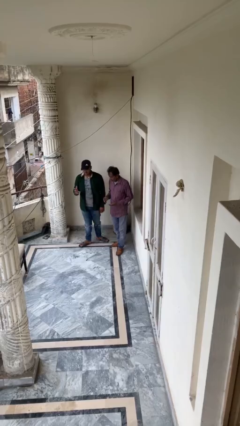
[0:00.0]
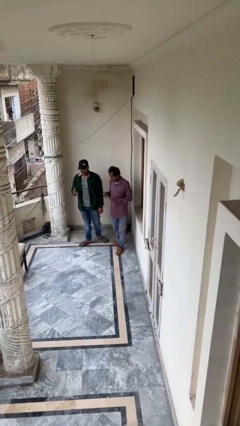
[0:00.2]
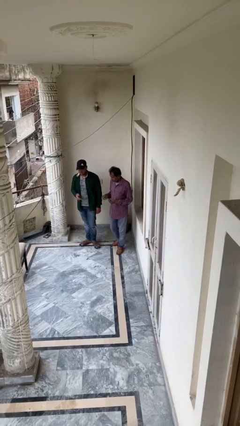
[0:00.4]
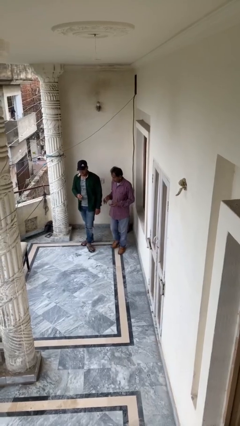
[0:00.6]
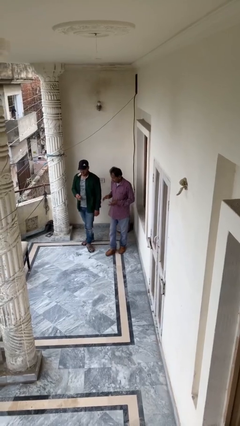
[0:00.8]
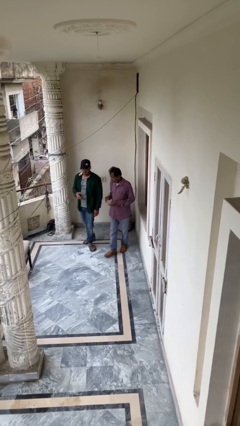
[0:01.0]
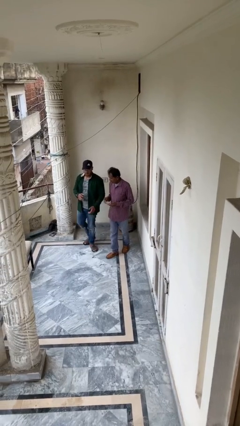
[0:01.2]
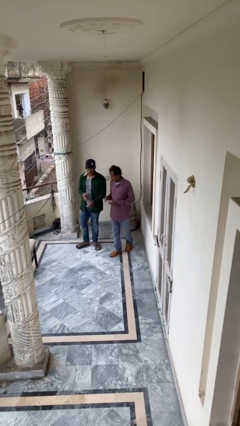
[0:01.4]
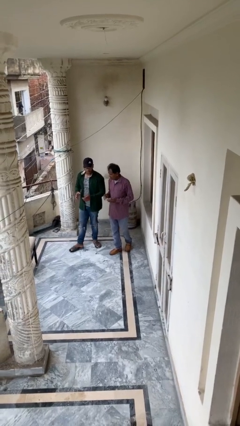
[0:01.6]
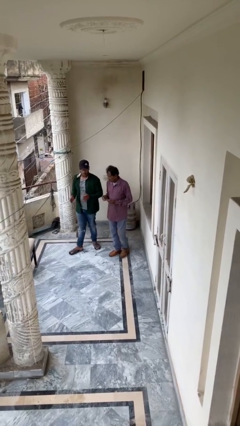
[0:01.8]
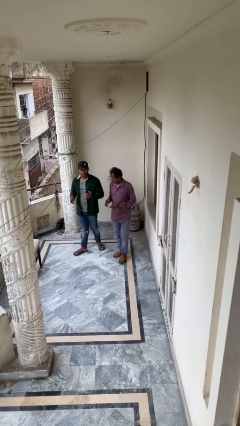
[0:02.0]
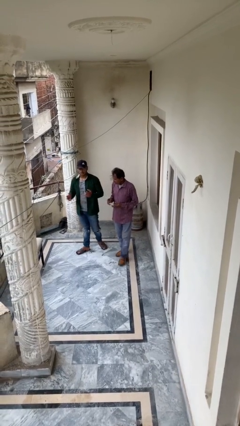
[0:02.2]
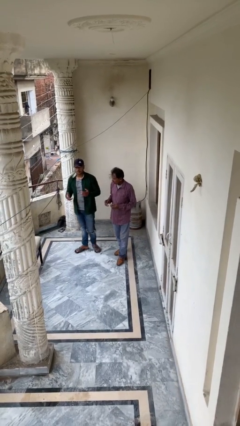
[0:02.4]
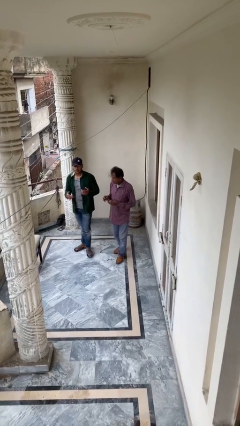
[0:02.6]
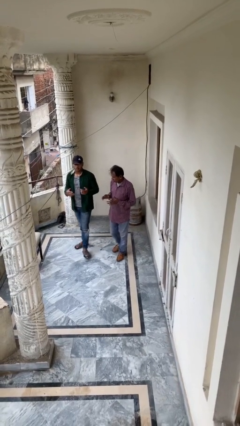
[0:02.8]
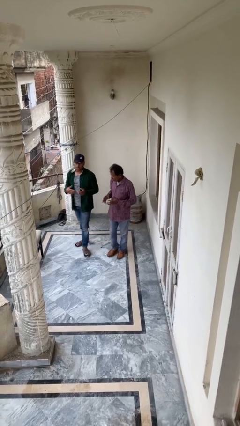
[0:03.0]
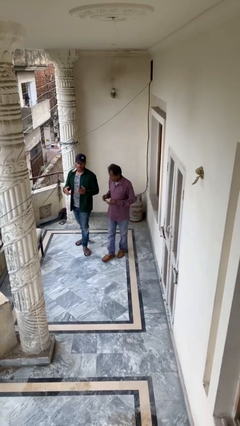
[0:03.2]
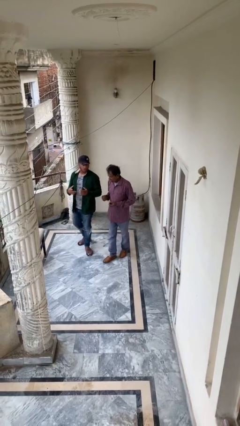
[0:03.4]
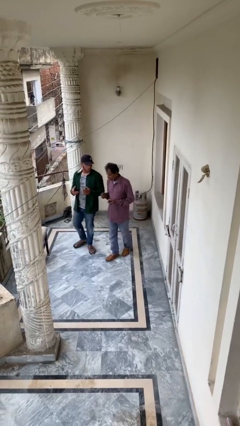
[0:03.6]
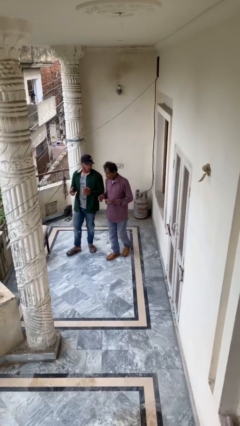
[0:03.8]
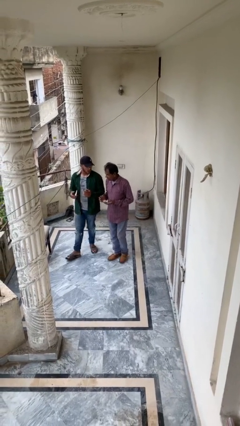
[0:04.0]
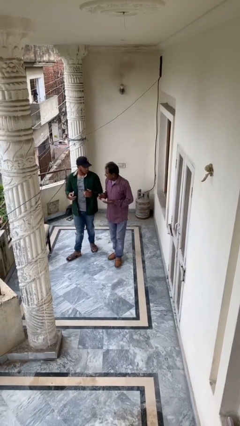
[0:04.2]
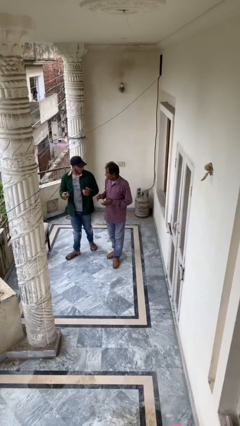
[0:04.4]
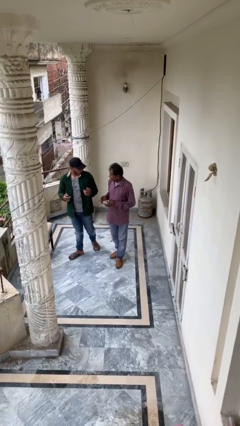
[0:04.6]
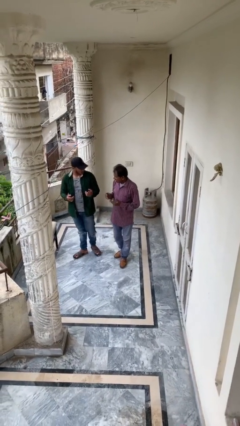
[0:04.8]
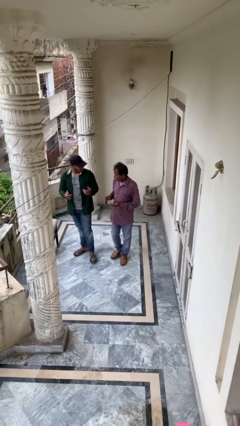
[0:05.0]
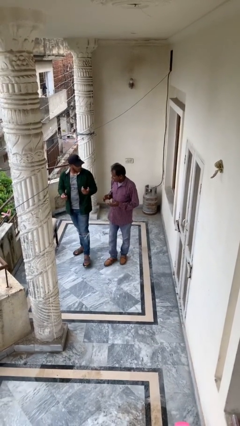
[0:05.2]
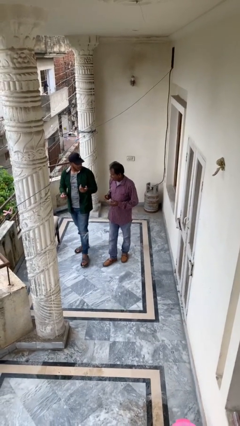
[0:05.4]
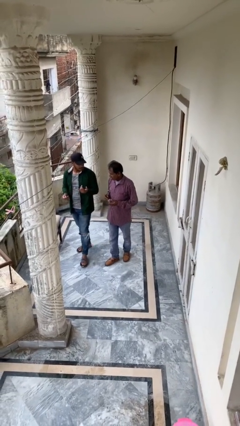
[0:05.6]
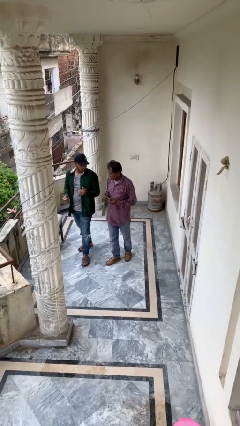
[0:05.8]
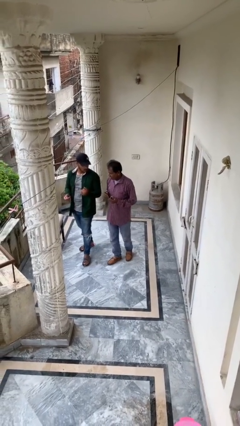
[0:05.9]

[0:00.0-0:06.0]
person talks to person

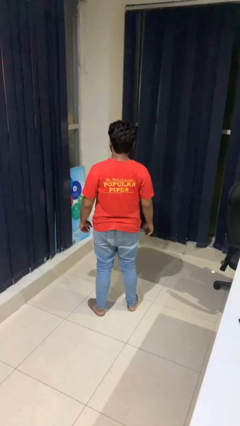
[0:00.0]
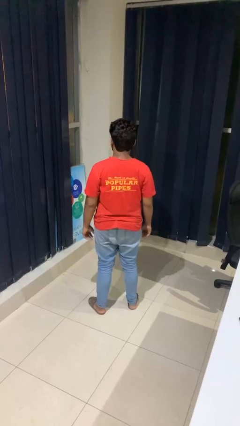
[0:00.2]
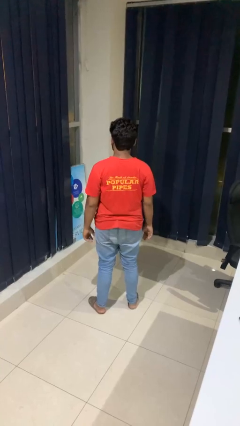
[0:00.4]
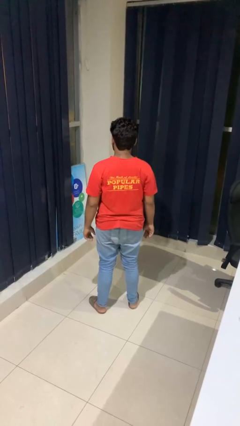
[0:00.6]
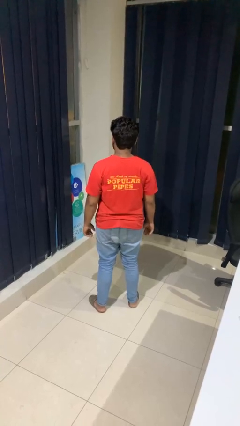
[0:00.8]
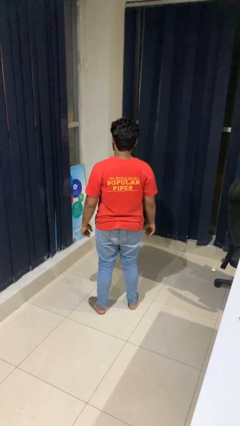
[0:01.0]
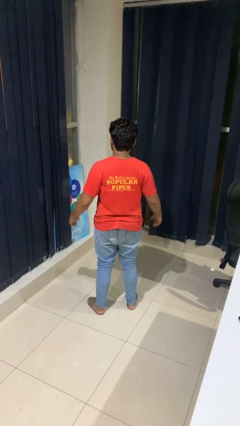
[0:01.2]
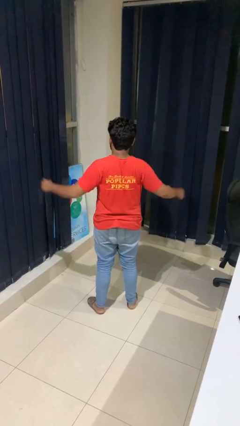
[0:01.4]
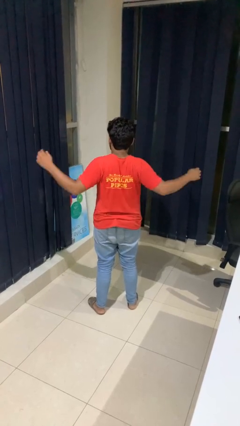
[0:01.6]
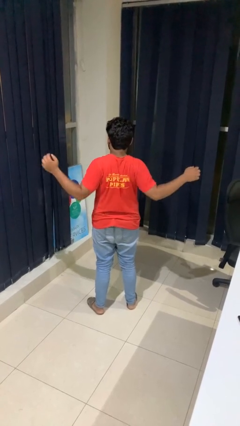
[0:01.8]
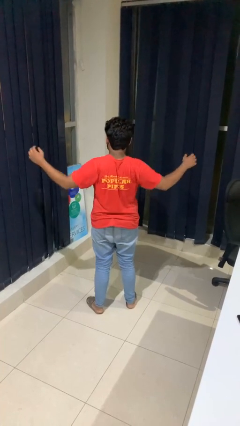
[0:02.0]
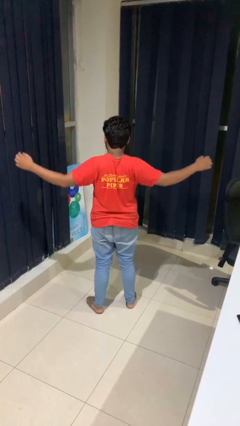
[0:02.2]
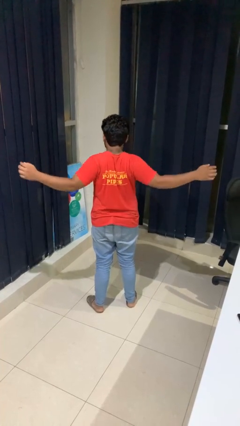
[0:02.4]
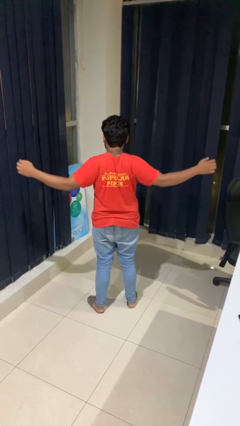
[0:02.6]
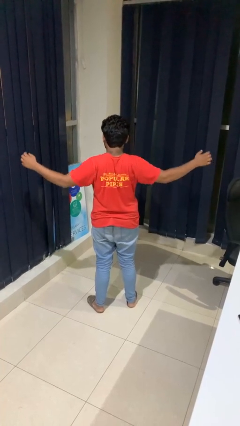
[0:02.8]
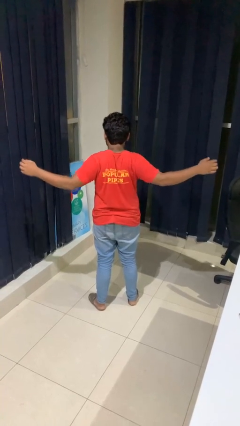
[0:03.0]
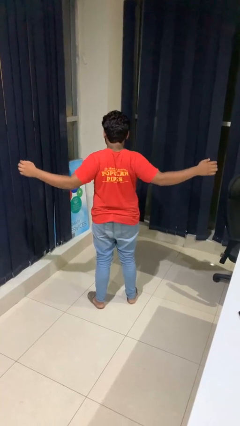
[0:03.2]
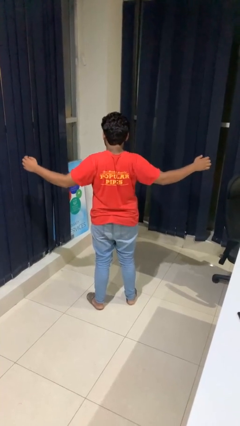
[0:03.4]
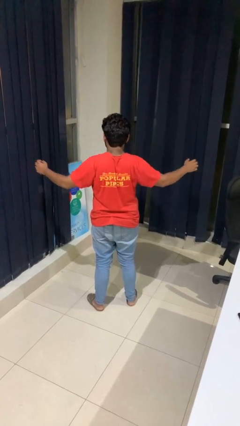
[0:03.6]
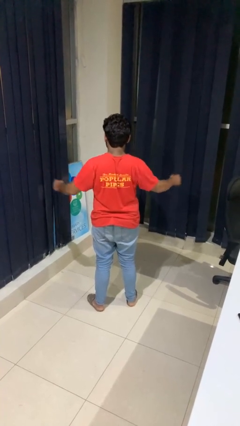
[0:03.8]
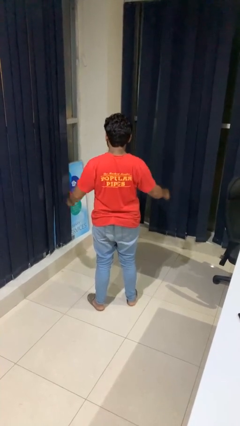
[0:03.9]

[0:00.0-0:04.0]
person stretches arms to side

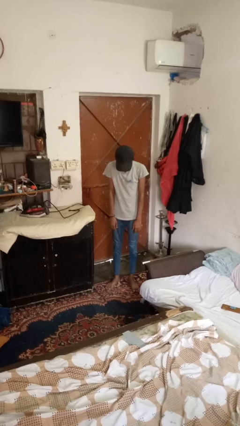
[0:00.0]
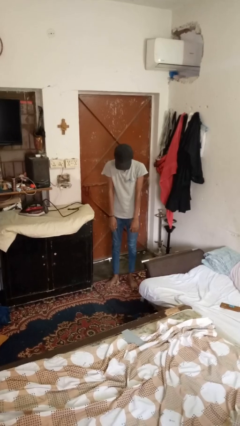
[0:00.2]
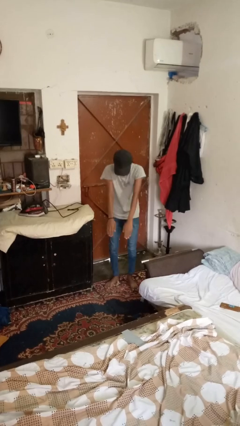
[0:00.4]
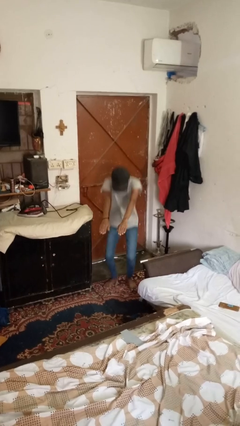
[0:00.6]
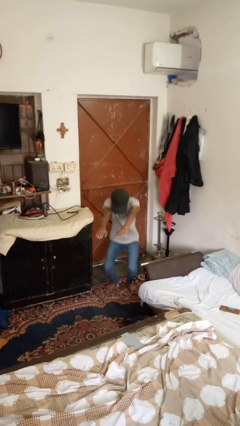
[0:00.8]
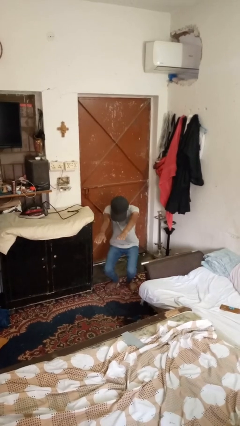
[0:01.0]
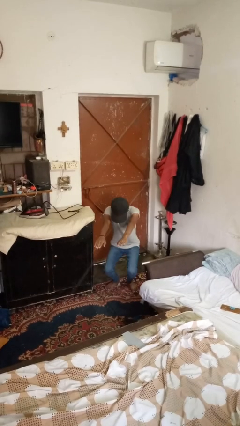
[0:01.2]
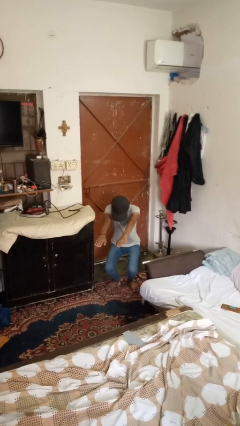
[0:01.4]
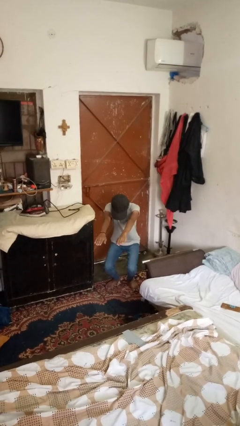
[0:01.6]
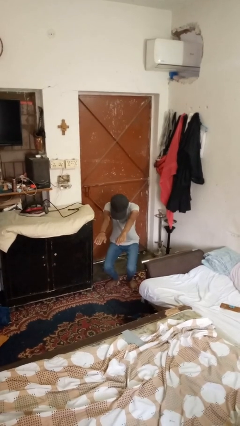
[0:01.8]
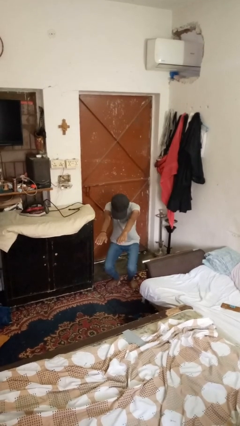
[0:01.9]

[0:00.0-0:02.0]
person squats

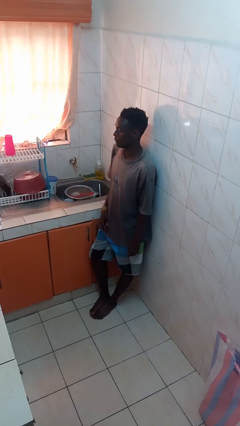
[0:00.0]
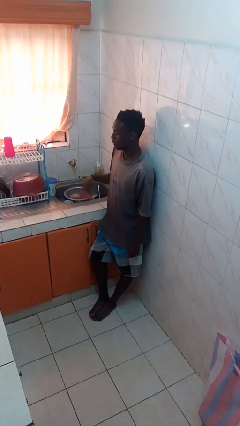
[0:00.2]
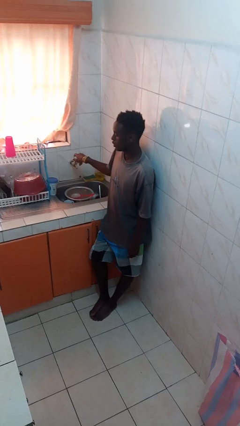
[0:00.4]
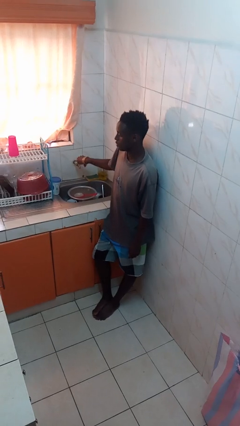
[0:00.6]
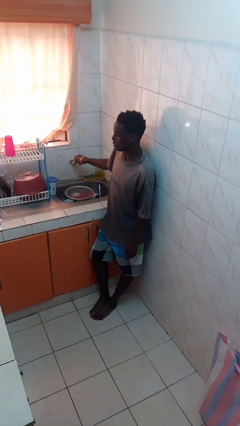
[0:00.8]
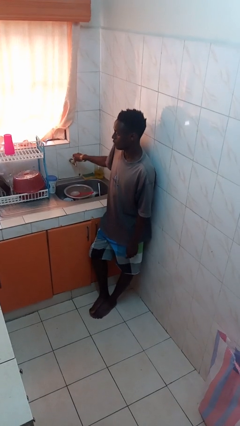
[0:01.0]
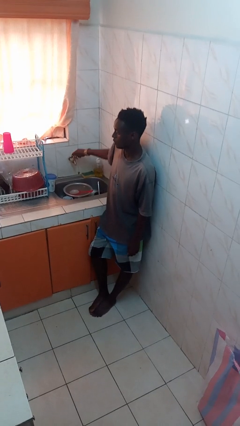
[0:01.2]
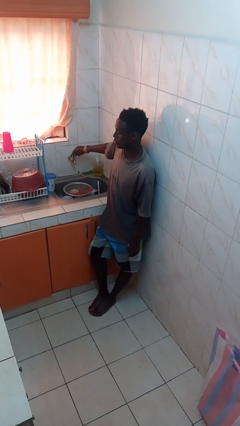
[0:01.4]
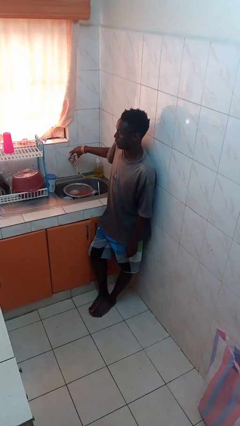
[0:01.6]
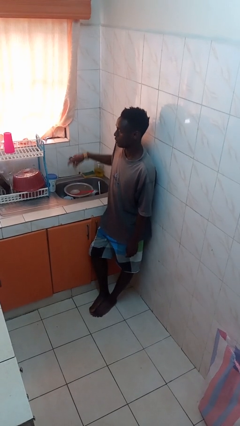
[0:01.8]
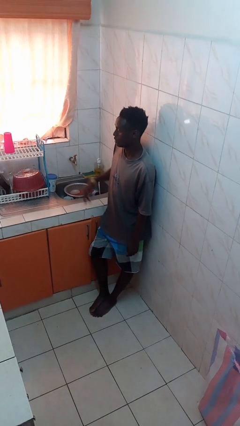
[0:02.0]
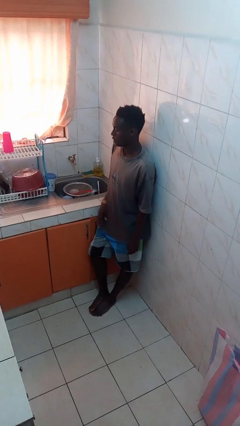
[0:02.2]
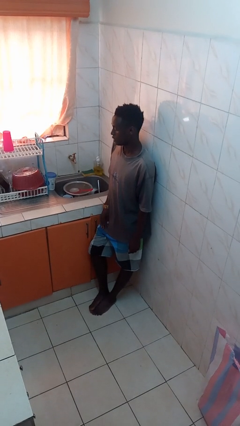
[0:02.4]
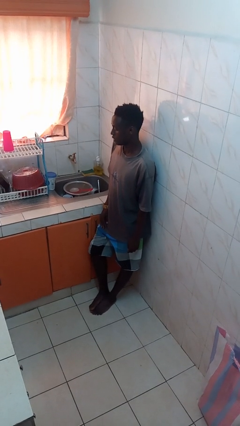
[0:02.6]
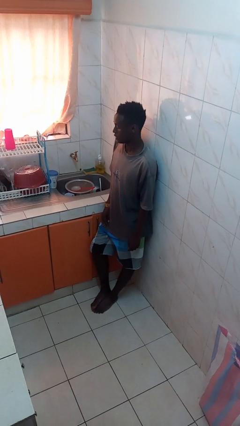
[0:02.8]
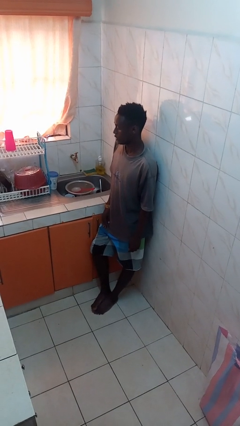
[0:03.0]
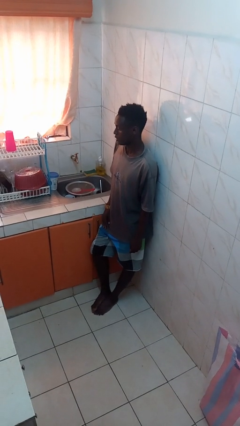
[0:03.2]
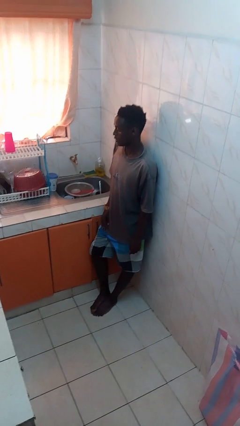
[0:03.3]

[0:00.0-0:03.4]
person turns on faucet

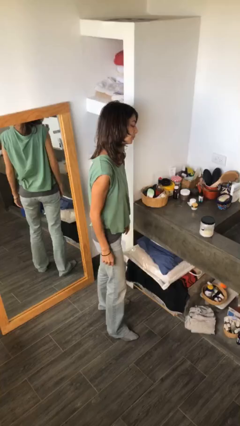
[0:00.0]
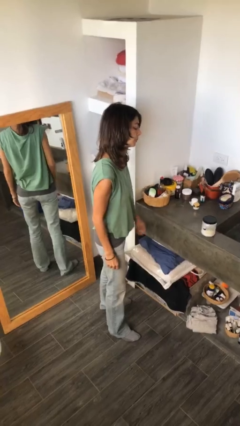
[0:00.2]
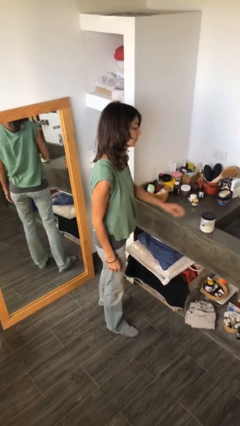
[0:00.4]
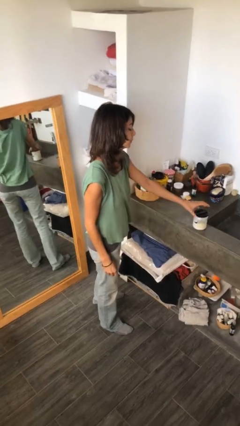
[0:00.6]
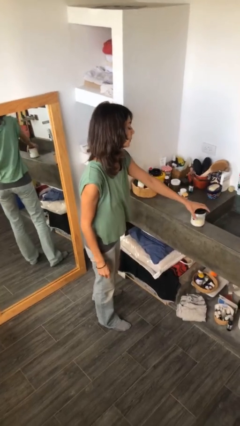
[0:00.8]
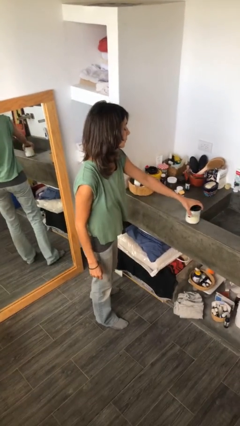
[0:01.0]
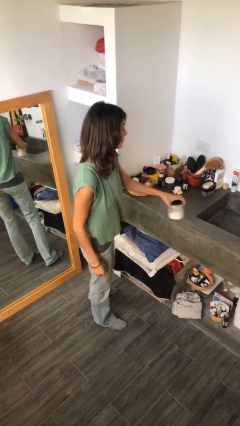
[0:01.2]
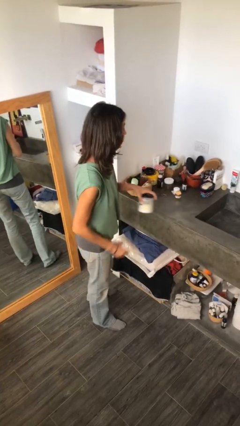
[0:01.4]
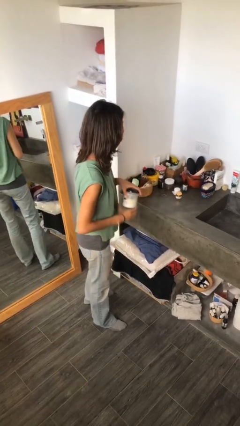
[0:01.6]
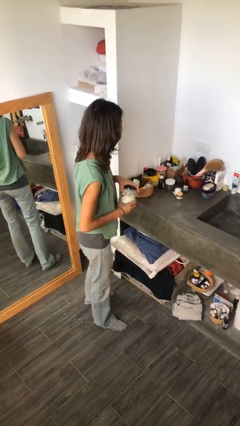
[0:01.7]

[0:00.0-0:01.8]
person picks up object from countertop

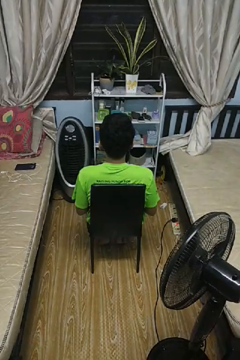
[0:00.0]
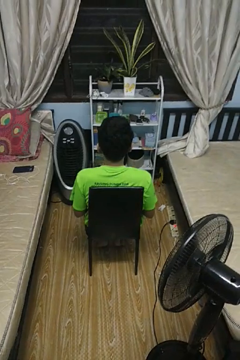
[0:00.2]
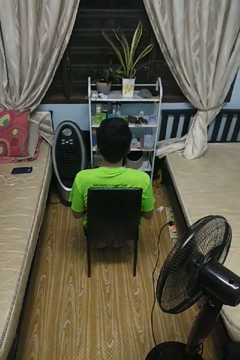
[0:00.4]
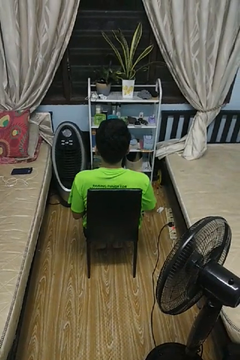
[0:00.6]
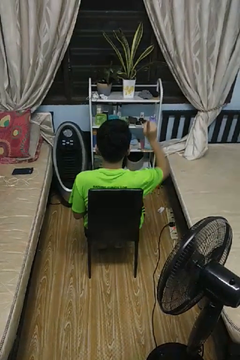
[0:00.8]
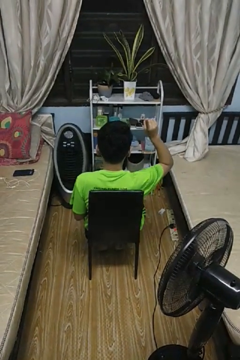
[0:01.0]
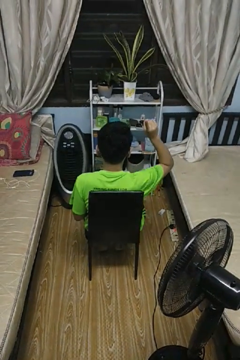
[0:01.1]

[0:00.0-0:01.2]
person gestures number one
